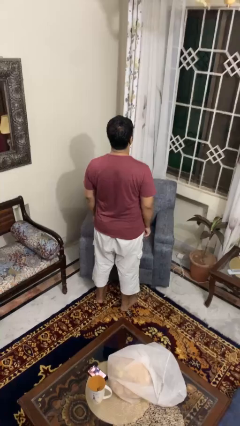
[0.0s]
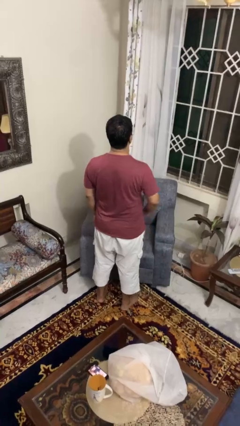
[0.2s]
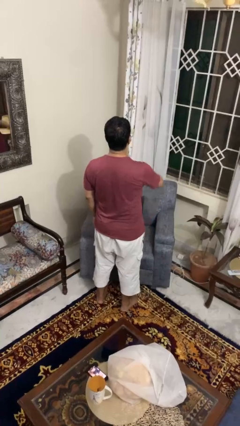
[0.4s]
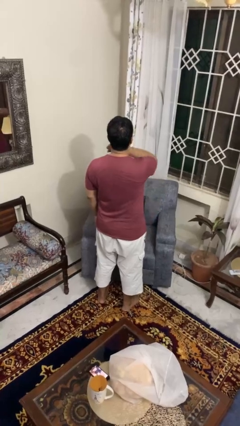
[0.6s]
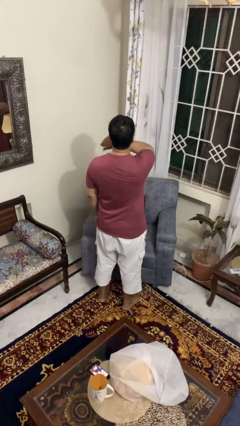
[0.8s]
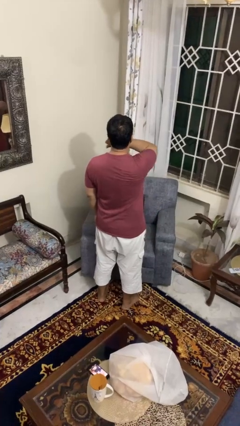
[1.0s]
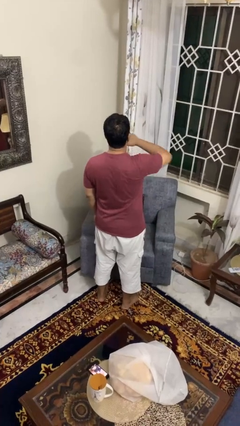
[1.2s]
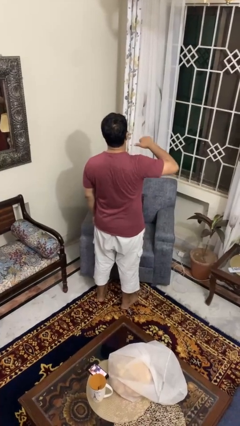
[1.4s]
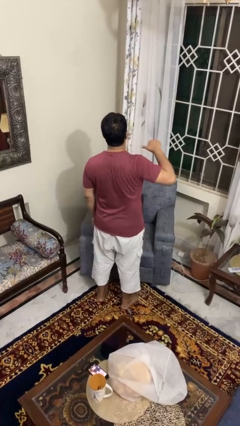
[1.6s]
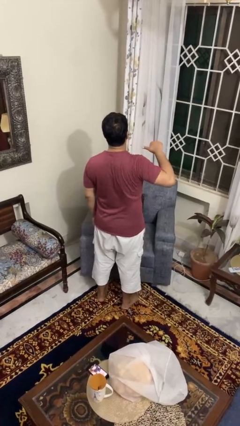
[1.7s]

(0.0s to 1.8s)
person gestures cut

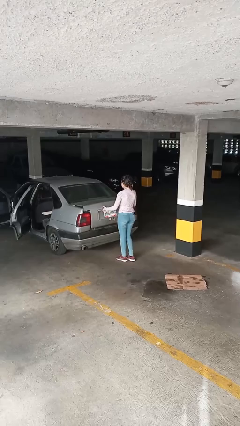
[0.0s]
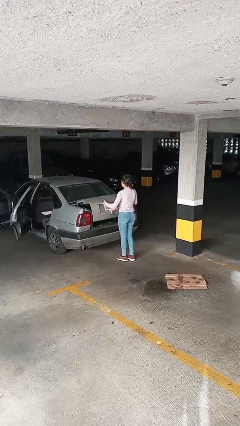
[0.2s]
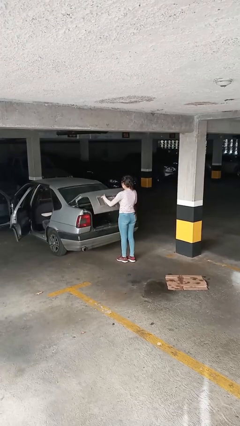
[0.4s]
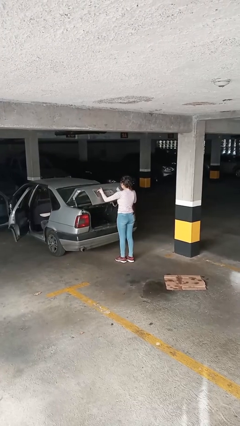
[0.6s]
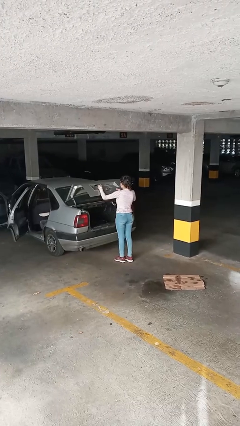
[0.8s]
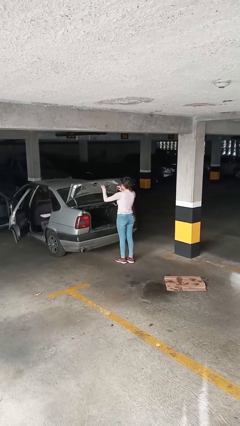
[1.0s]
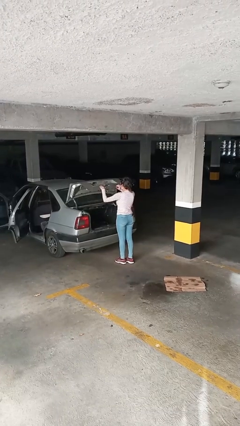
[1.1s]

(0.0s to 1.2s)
person opens car trunk

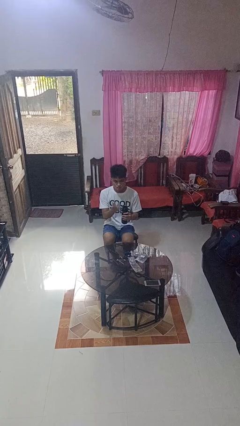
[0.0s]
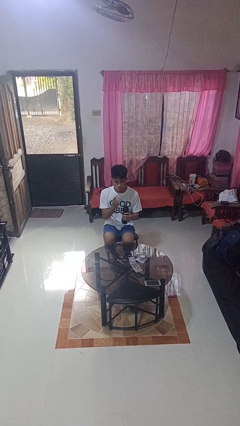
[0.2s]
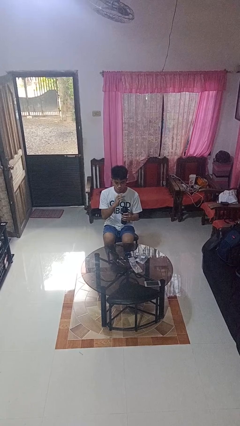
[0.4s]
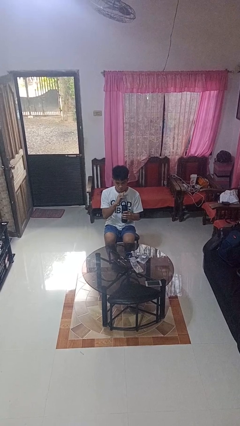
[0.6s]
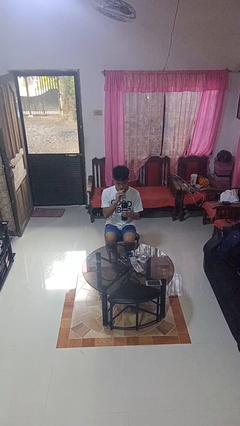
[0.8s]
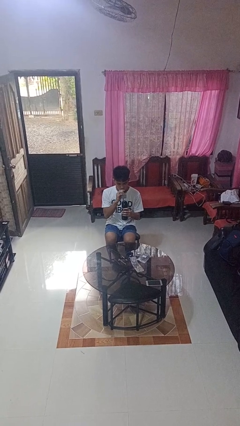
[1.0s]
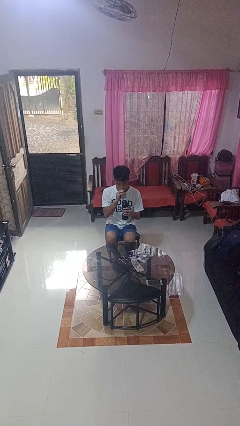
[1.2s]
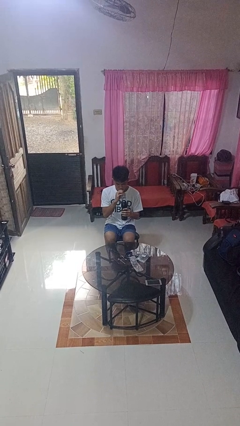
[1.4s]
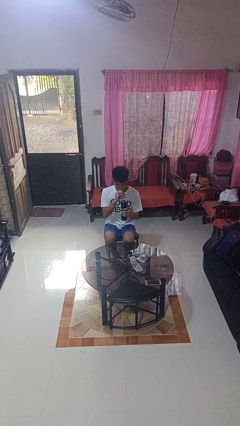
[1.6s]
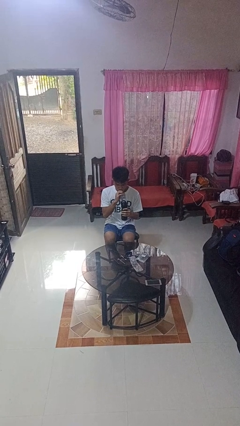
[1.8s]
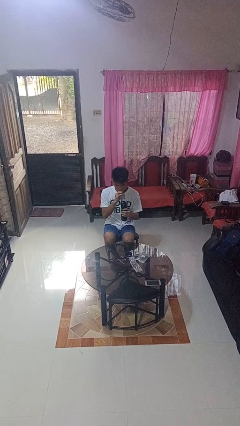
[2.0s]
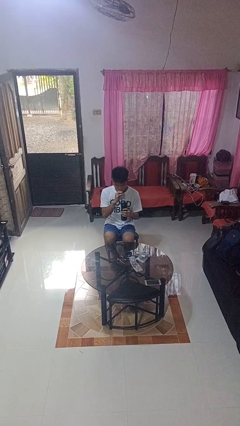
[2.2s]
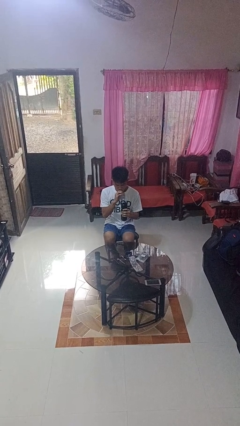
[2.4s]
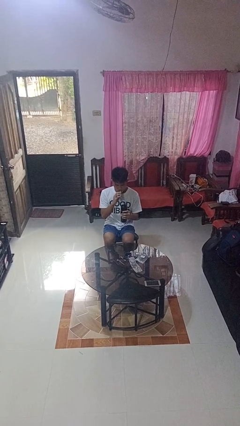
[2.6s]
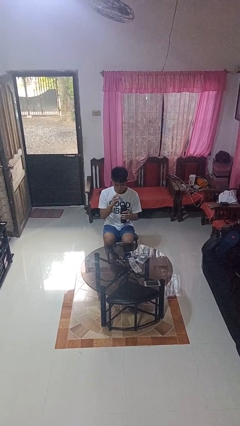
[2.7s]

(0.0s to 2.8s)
person drinks from straw

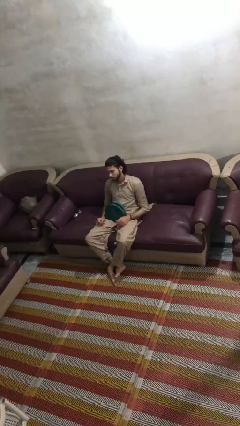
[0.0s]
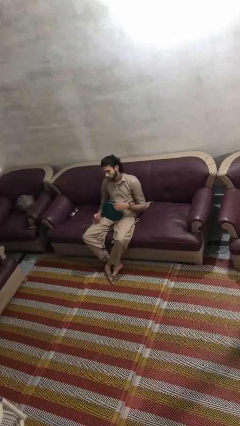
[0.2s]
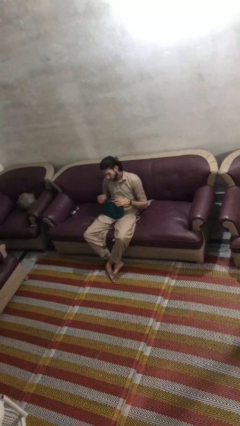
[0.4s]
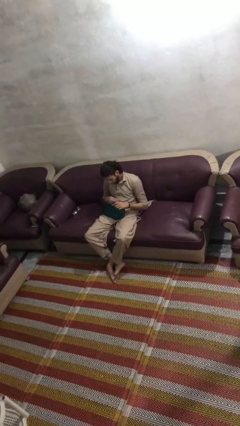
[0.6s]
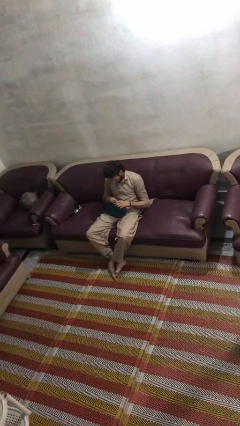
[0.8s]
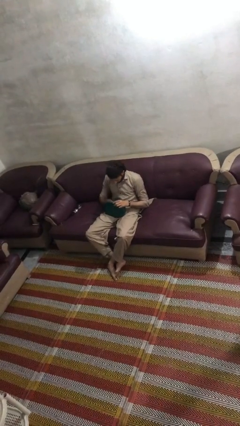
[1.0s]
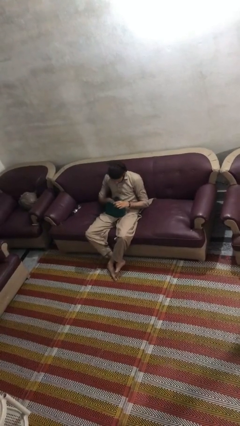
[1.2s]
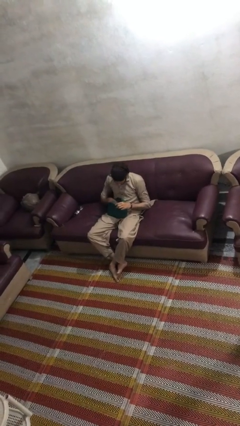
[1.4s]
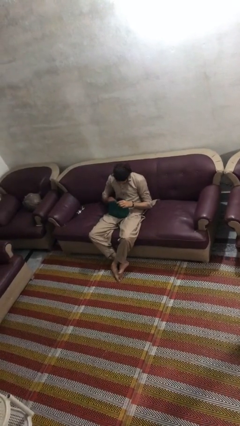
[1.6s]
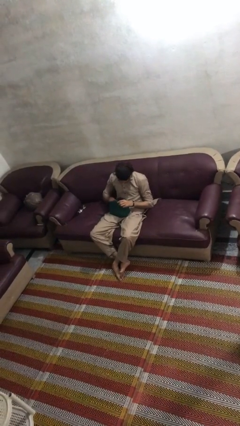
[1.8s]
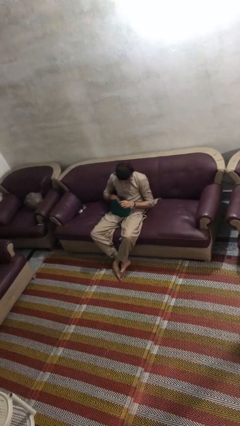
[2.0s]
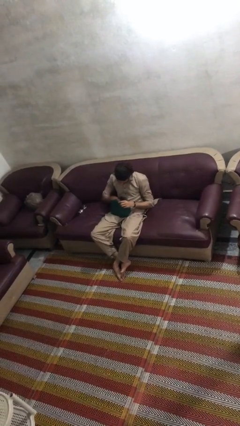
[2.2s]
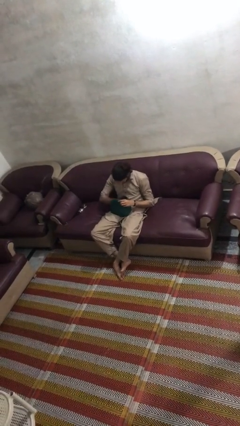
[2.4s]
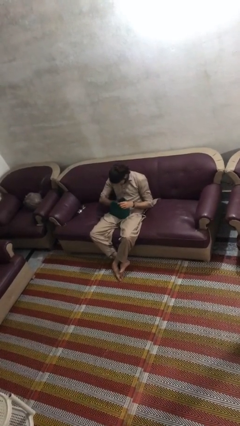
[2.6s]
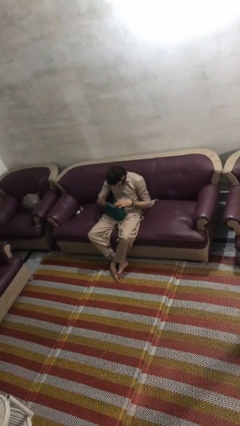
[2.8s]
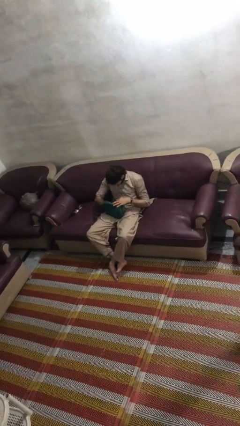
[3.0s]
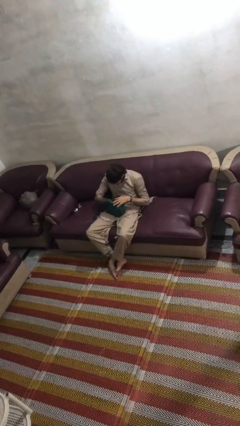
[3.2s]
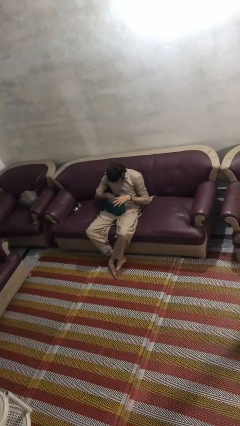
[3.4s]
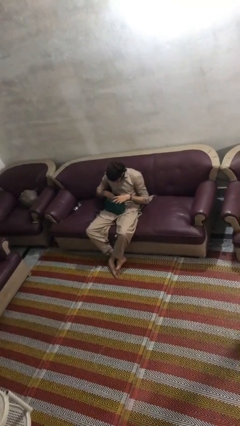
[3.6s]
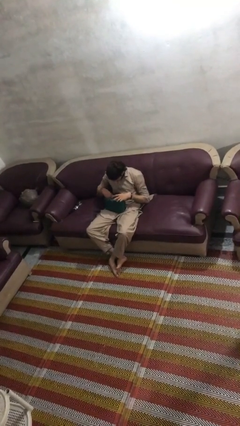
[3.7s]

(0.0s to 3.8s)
person searches in purse

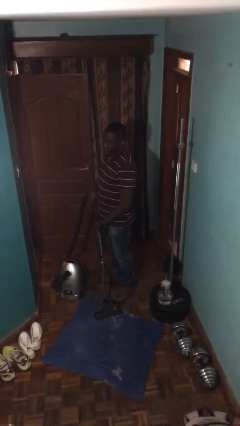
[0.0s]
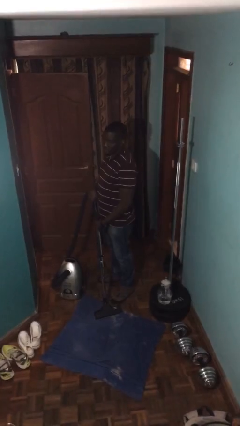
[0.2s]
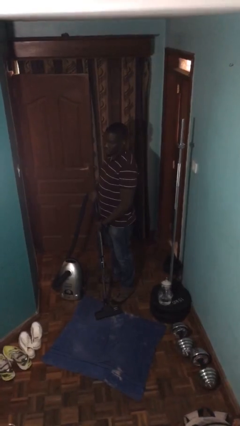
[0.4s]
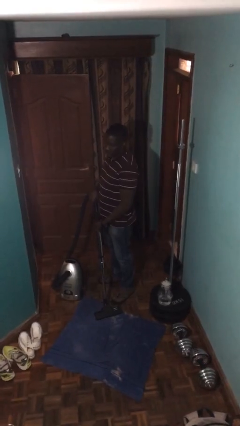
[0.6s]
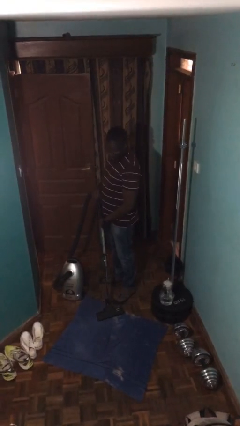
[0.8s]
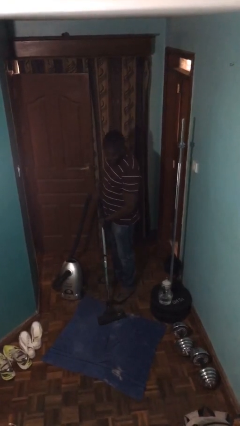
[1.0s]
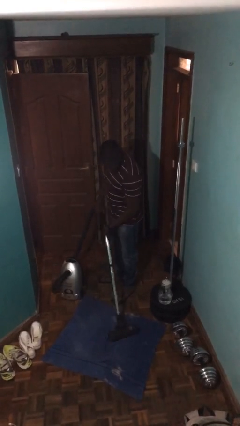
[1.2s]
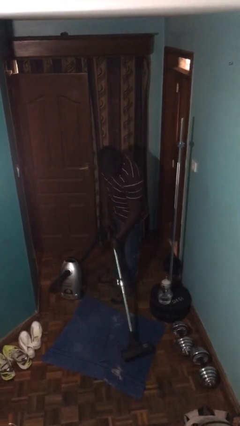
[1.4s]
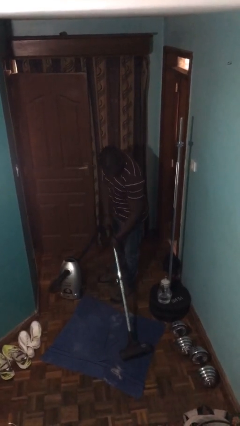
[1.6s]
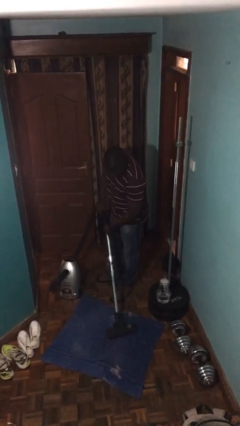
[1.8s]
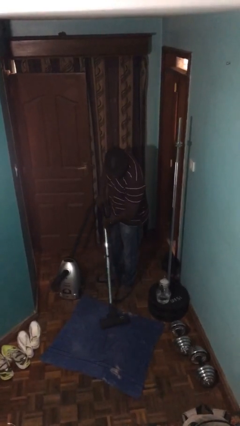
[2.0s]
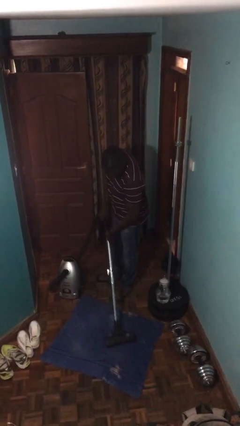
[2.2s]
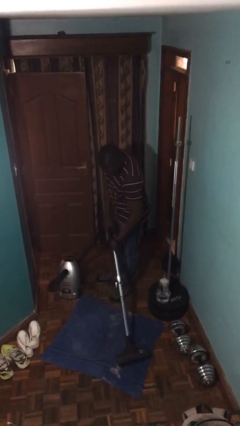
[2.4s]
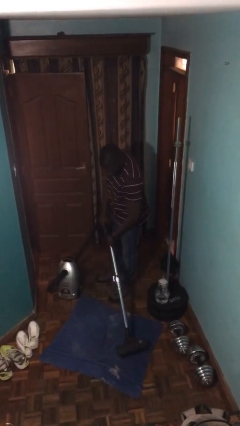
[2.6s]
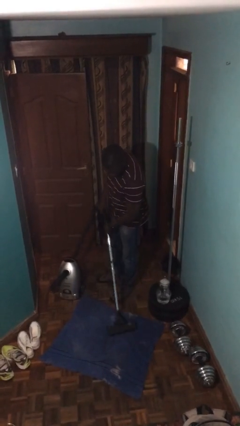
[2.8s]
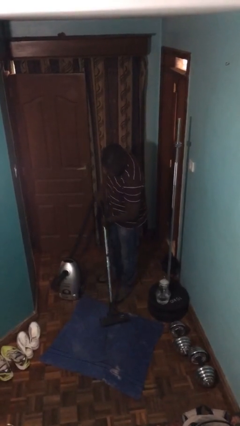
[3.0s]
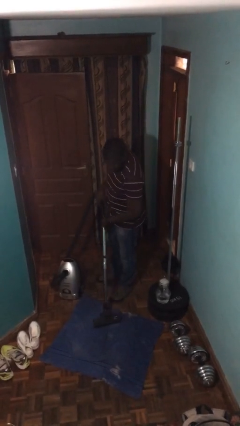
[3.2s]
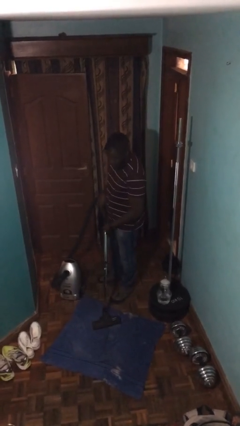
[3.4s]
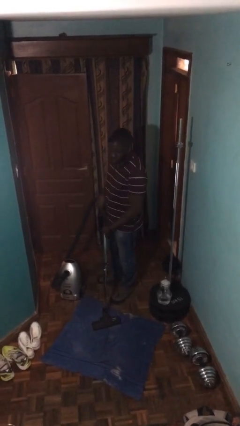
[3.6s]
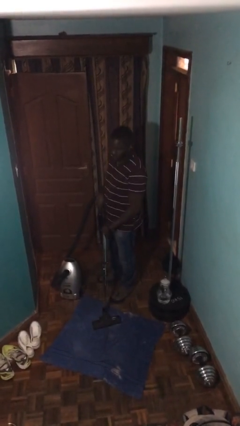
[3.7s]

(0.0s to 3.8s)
person vacuums carpet

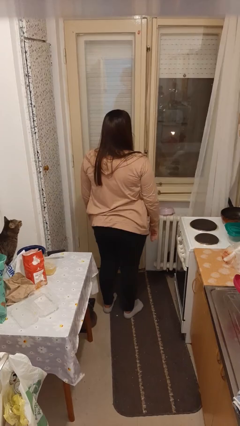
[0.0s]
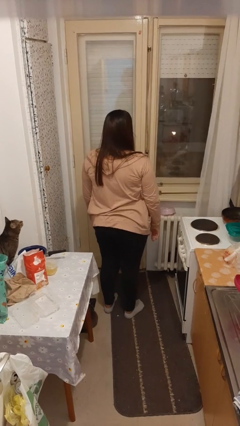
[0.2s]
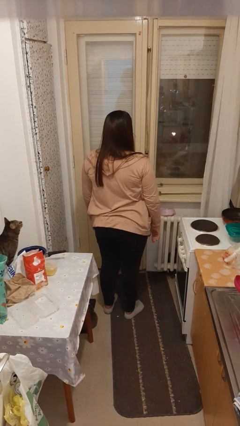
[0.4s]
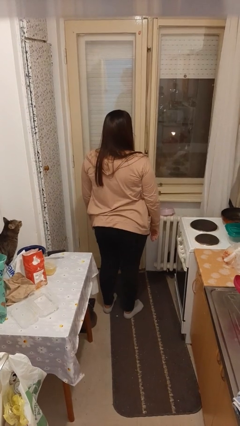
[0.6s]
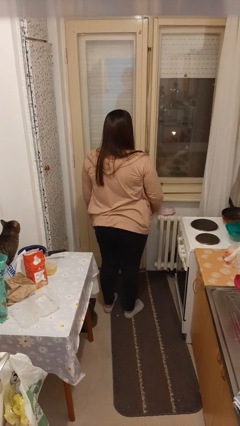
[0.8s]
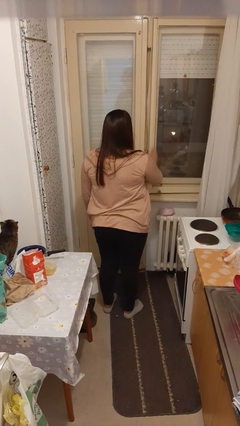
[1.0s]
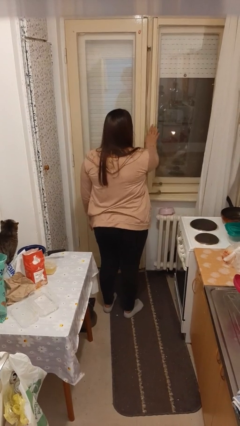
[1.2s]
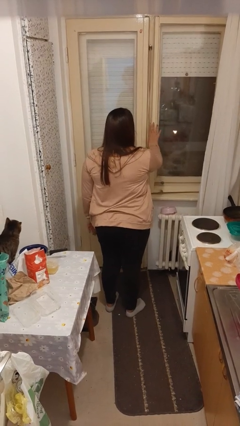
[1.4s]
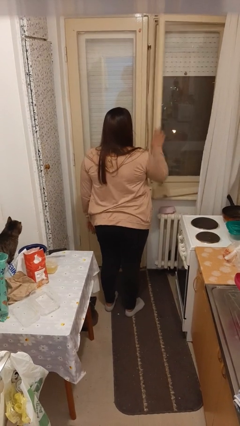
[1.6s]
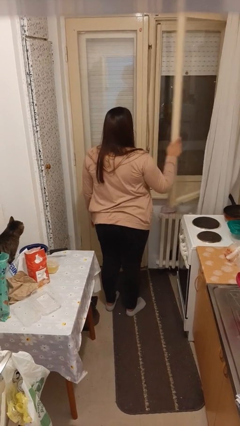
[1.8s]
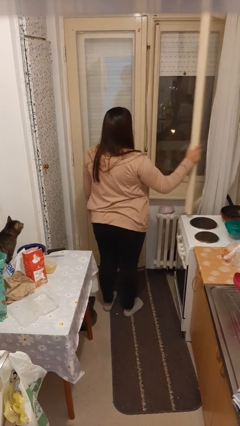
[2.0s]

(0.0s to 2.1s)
person opens home window

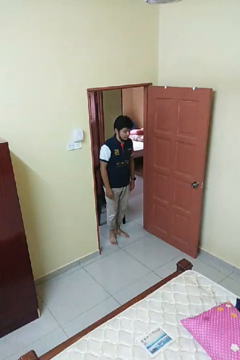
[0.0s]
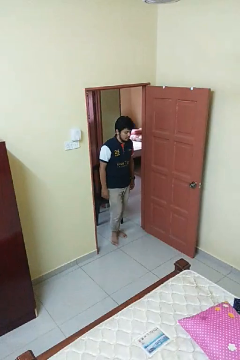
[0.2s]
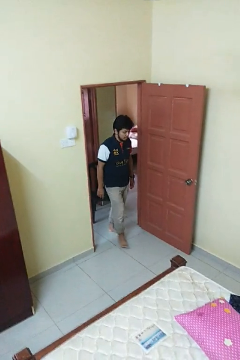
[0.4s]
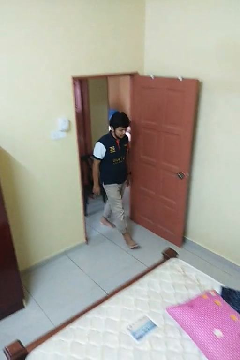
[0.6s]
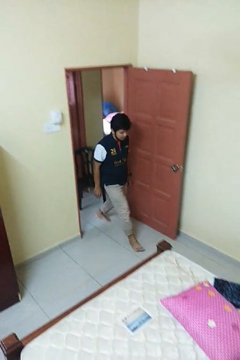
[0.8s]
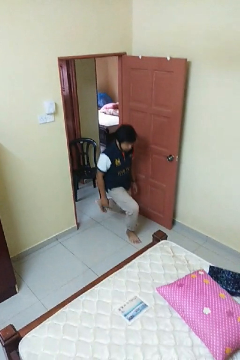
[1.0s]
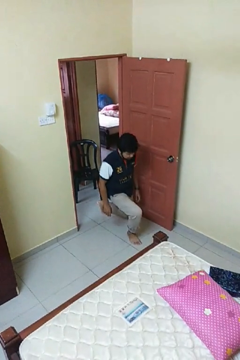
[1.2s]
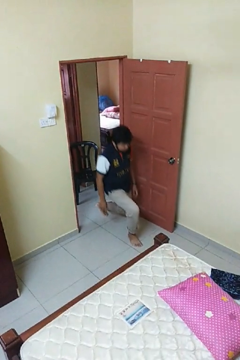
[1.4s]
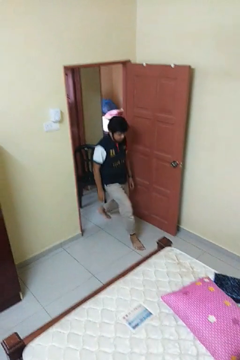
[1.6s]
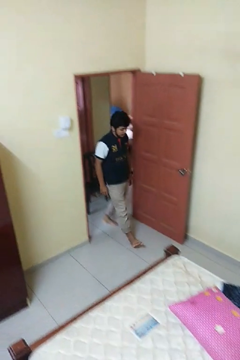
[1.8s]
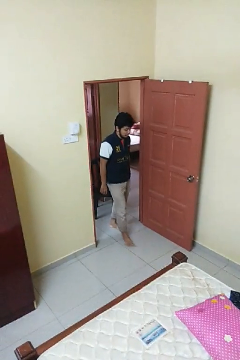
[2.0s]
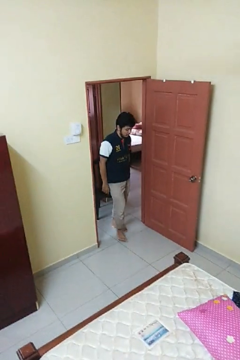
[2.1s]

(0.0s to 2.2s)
person exercises with lunges
